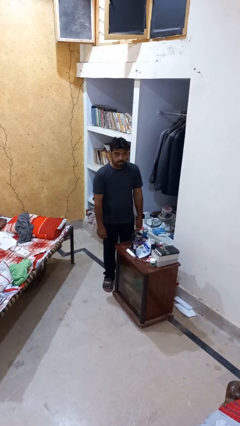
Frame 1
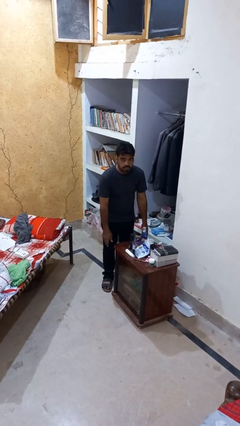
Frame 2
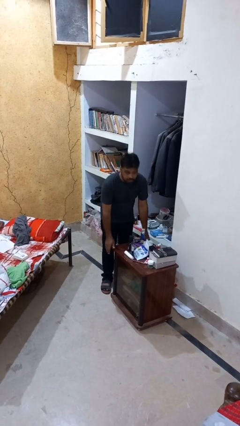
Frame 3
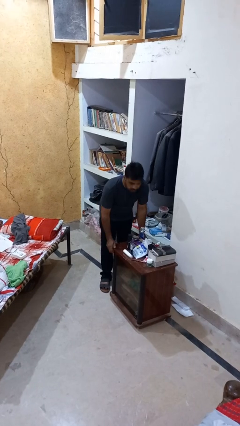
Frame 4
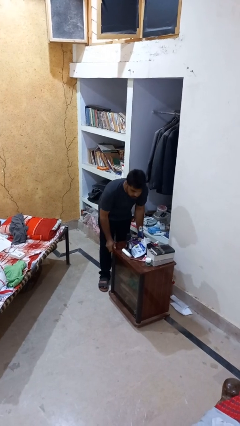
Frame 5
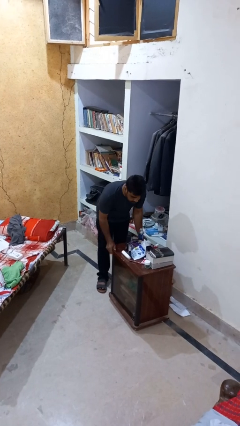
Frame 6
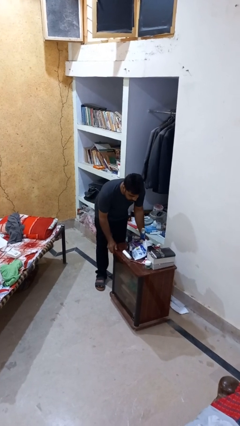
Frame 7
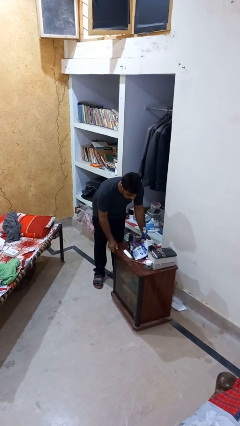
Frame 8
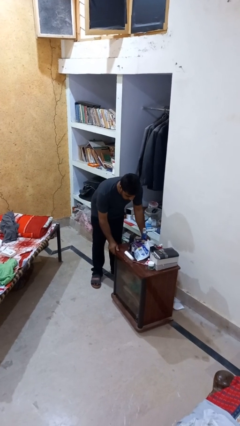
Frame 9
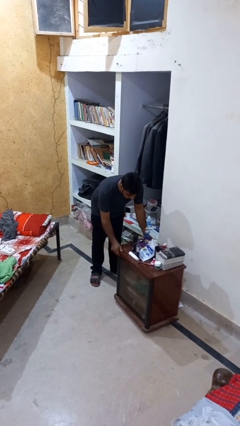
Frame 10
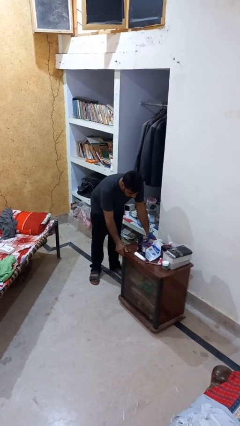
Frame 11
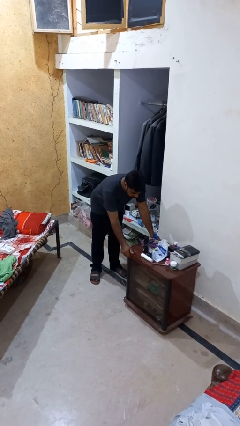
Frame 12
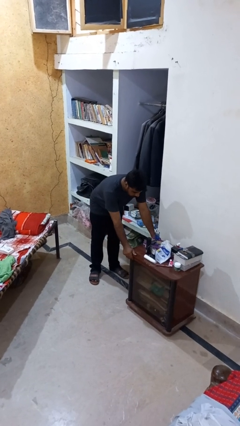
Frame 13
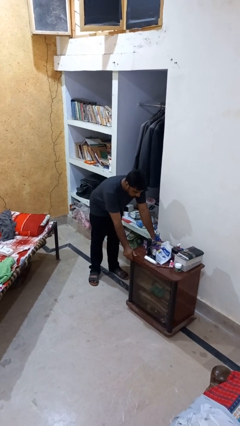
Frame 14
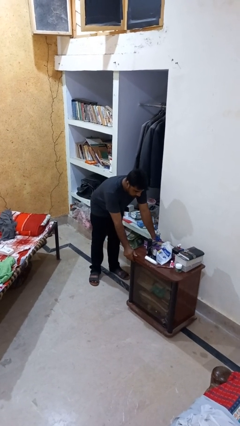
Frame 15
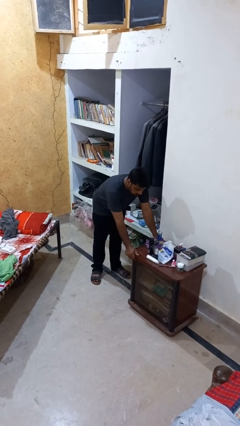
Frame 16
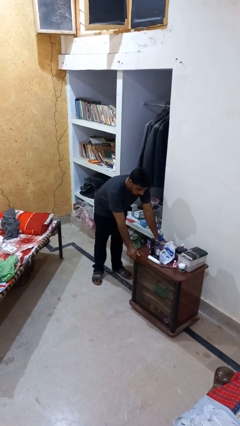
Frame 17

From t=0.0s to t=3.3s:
person pushes wheeled cart

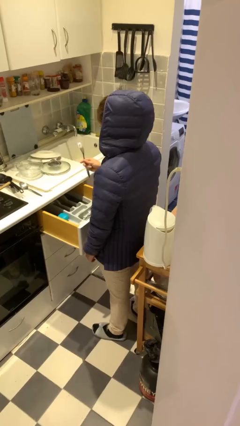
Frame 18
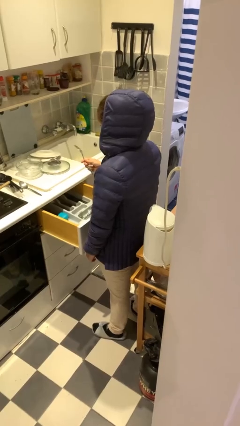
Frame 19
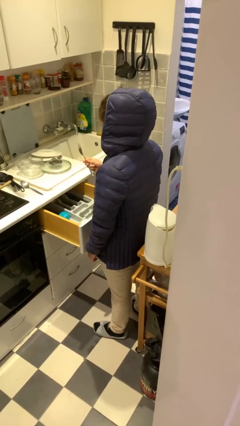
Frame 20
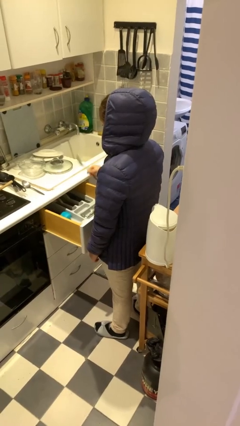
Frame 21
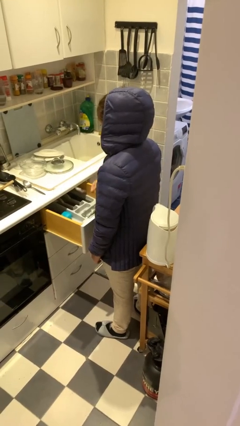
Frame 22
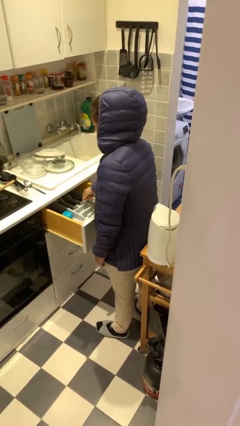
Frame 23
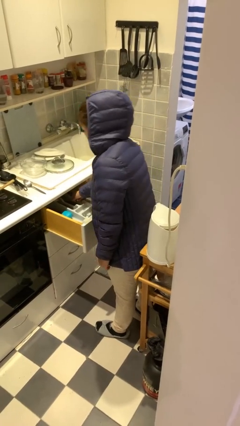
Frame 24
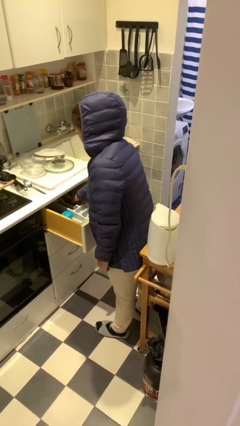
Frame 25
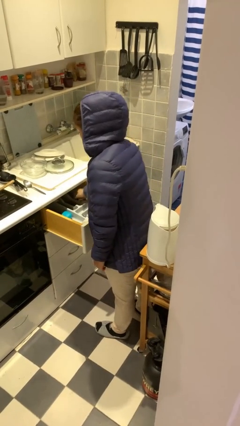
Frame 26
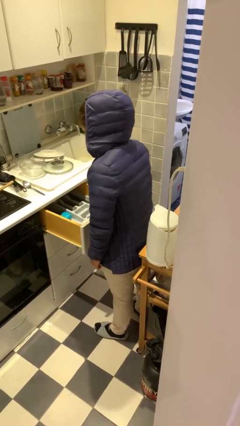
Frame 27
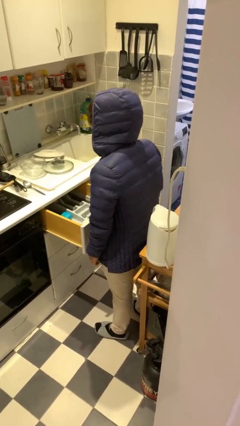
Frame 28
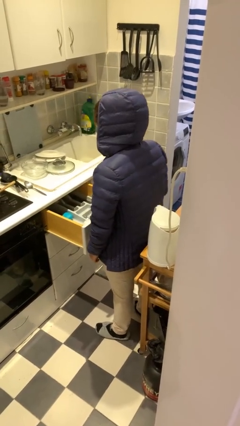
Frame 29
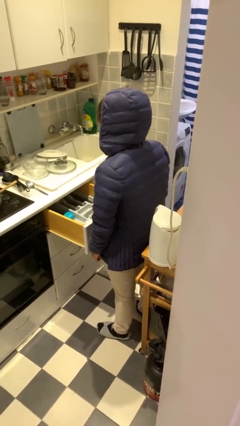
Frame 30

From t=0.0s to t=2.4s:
person puts object into kitchen drawer

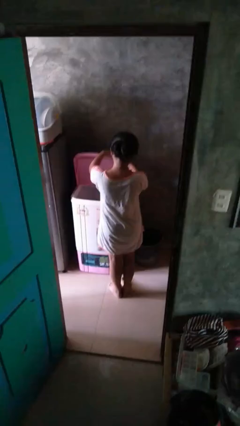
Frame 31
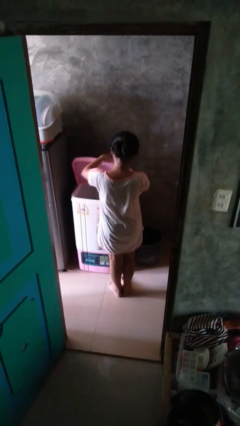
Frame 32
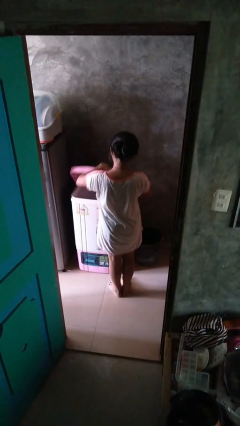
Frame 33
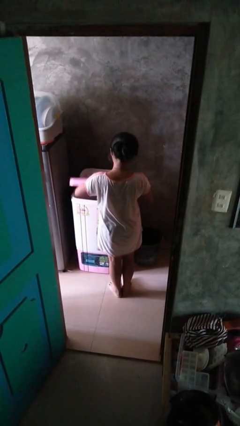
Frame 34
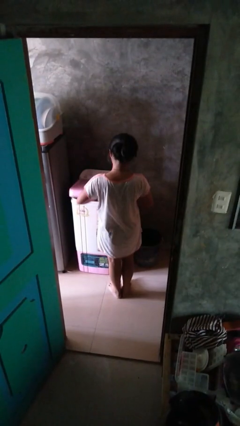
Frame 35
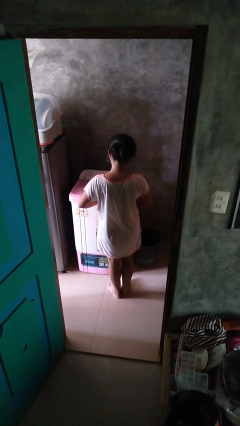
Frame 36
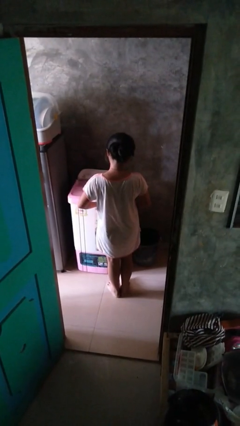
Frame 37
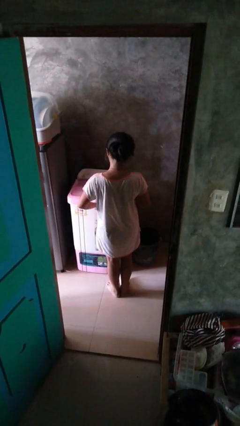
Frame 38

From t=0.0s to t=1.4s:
person closes clothes washer

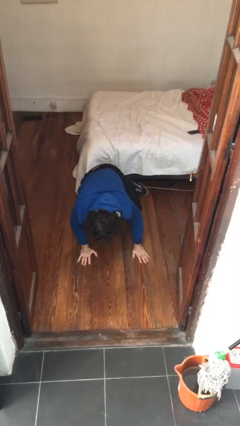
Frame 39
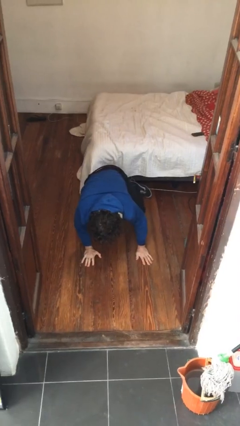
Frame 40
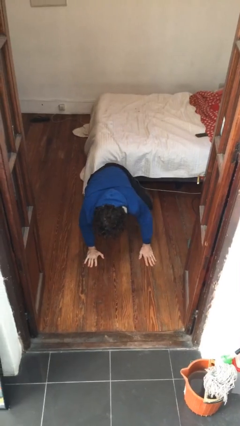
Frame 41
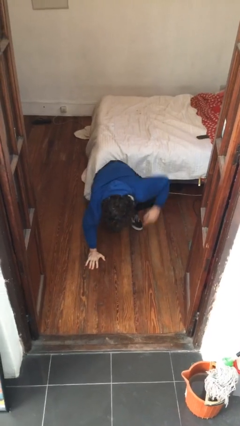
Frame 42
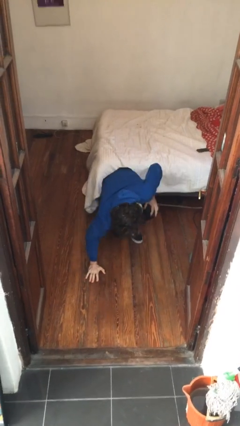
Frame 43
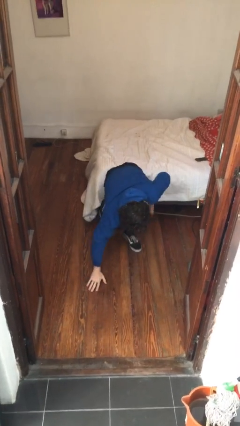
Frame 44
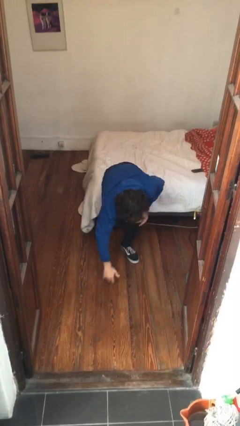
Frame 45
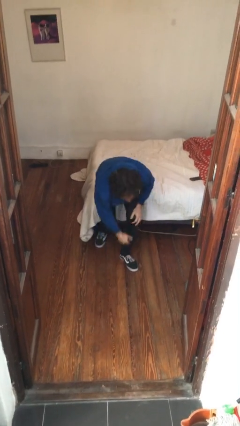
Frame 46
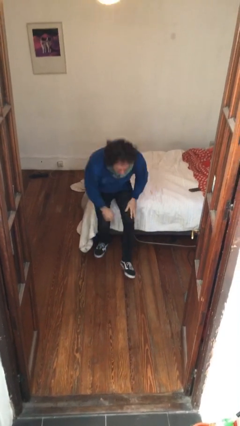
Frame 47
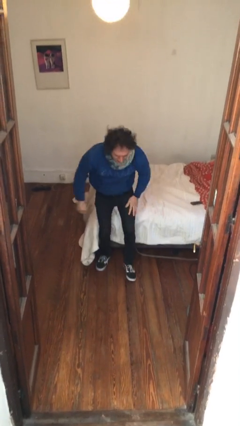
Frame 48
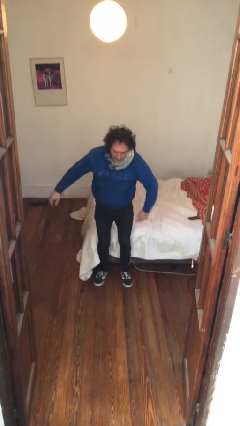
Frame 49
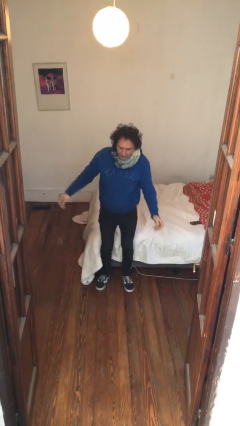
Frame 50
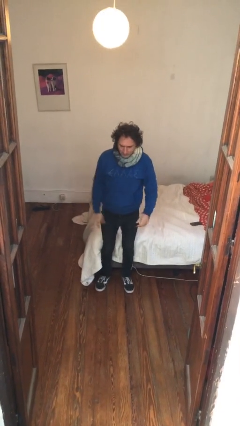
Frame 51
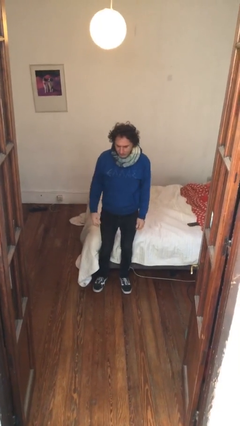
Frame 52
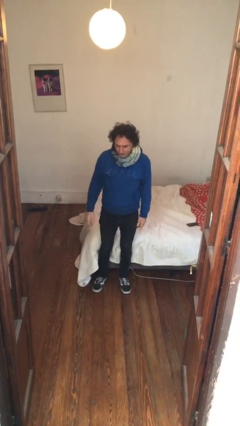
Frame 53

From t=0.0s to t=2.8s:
person stands up from floor

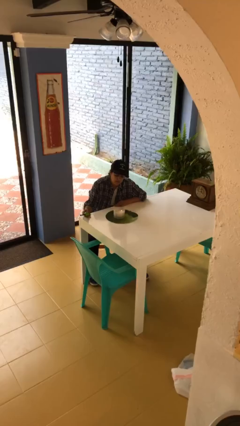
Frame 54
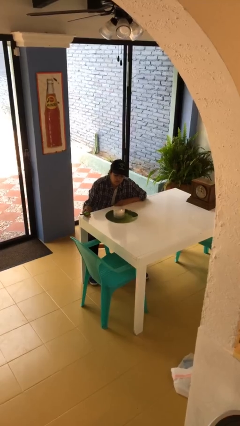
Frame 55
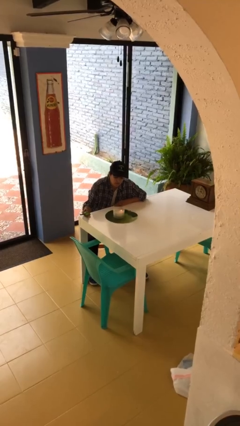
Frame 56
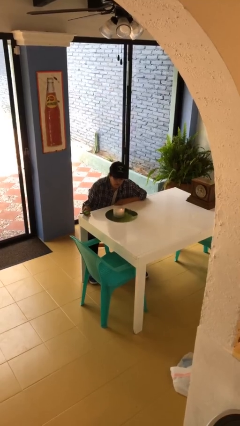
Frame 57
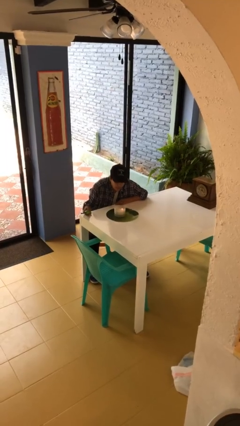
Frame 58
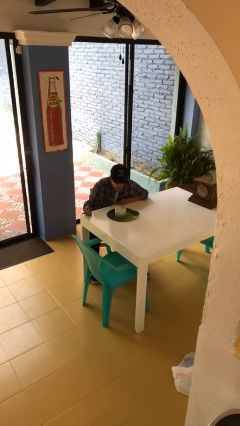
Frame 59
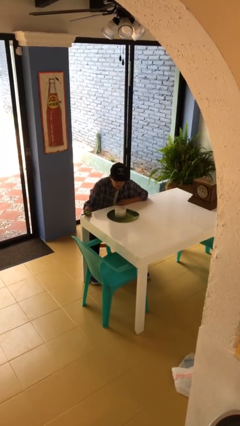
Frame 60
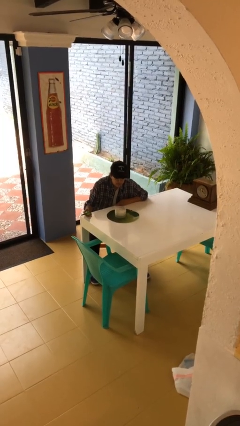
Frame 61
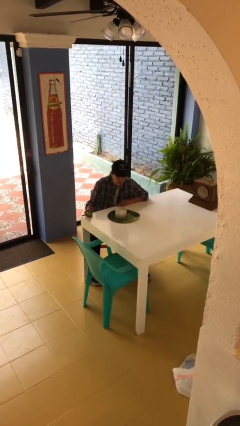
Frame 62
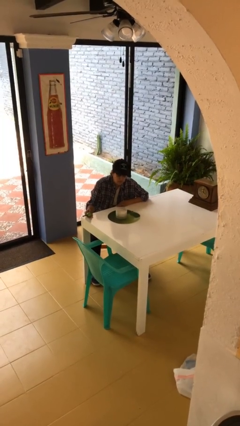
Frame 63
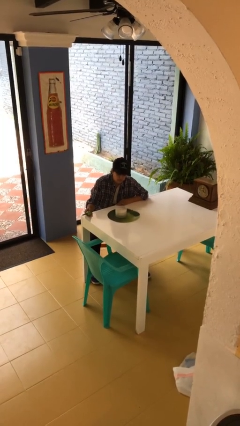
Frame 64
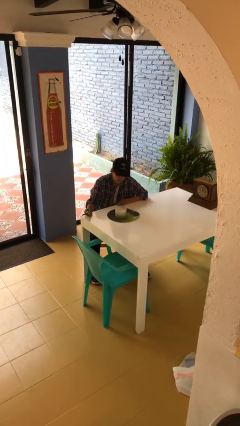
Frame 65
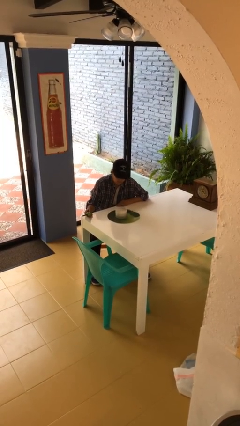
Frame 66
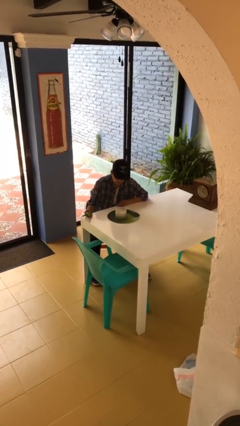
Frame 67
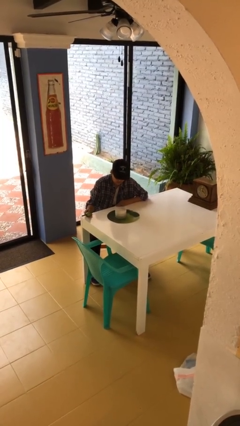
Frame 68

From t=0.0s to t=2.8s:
person extinguishes candle

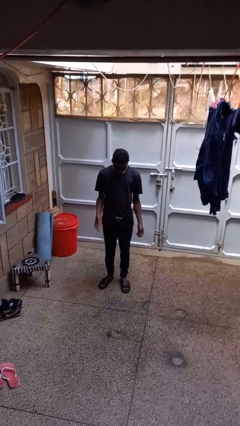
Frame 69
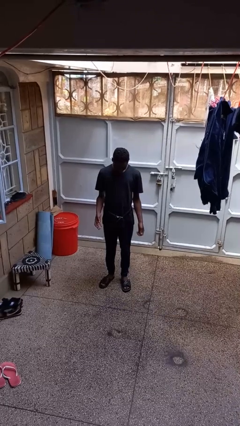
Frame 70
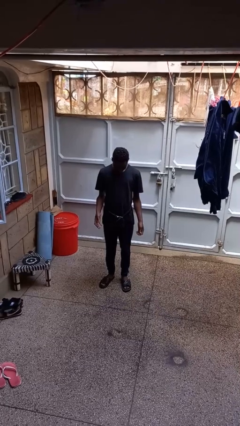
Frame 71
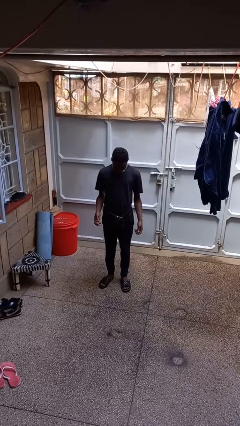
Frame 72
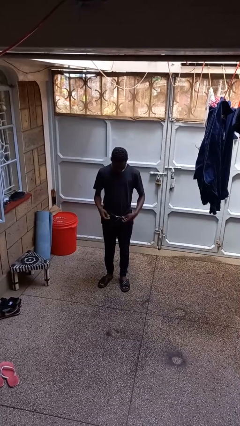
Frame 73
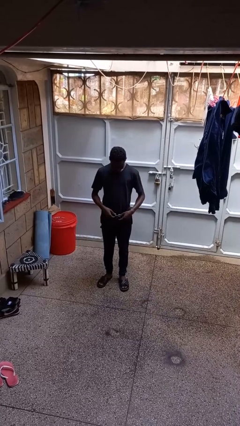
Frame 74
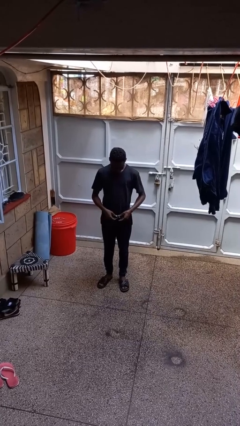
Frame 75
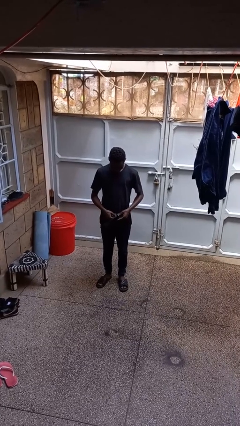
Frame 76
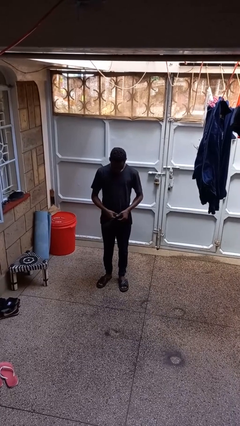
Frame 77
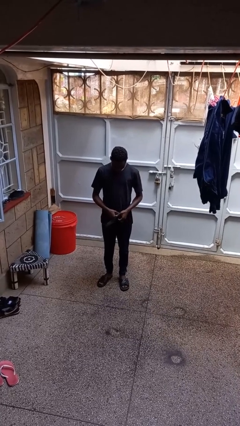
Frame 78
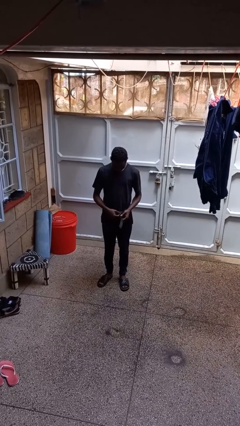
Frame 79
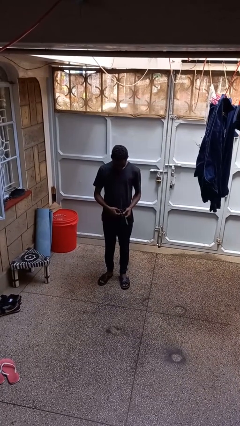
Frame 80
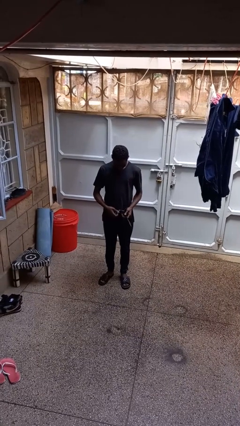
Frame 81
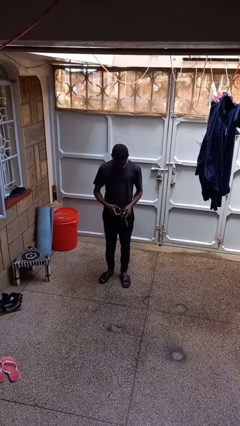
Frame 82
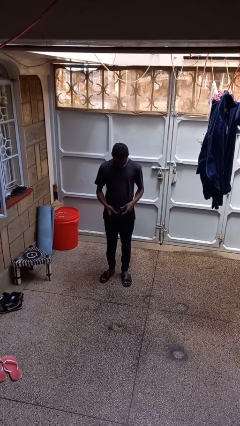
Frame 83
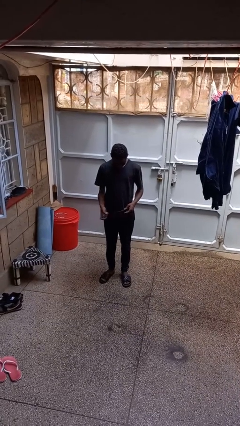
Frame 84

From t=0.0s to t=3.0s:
person takes off belt

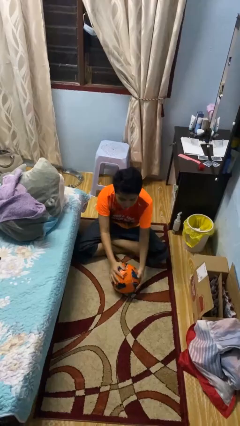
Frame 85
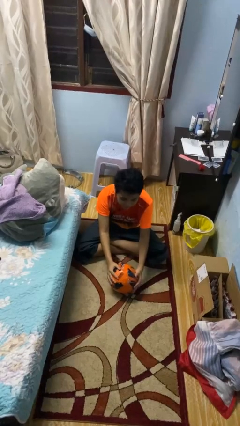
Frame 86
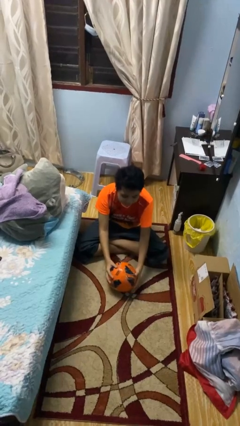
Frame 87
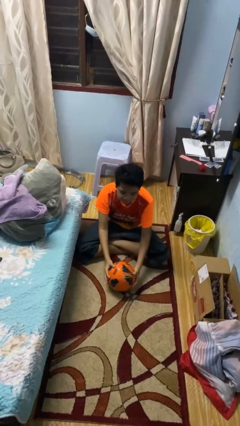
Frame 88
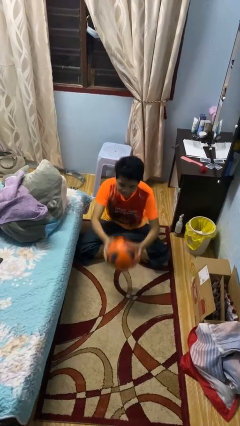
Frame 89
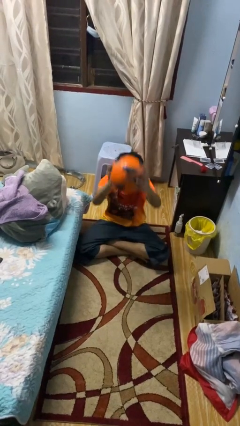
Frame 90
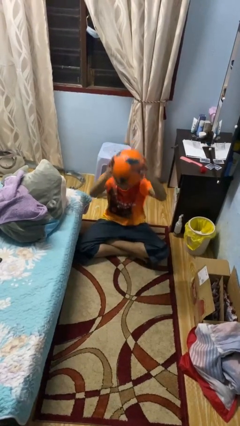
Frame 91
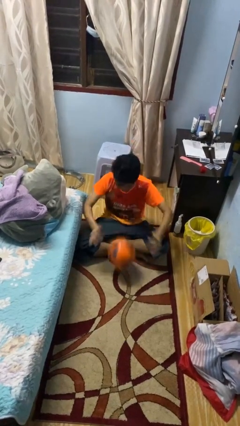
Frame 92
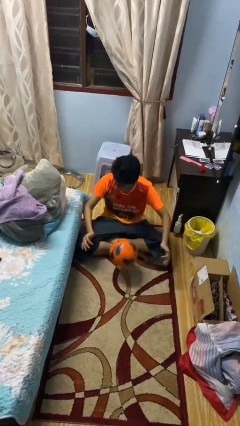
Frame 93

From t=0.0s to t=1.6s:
person bounces ball on floor
